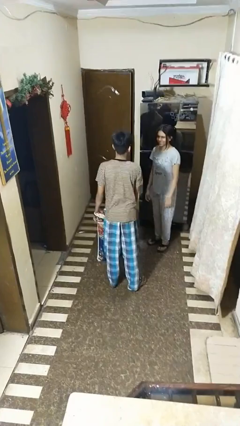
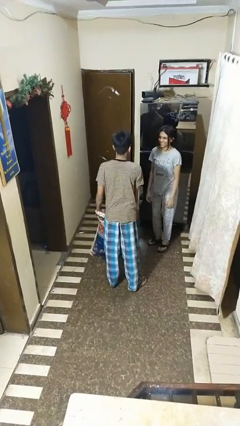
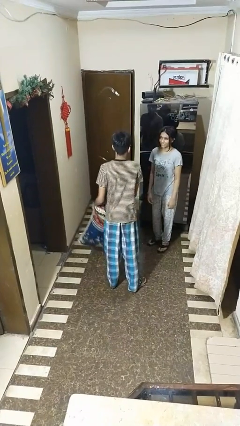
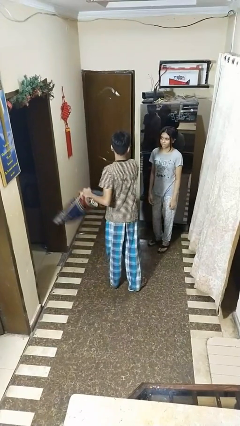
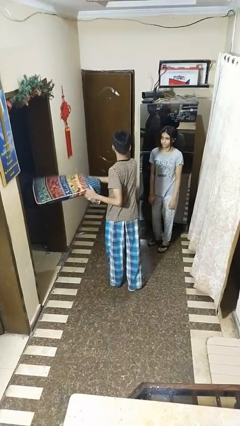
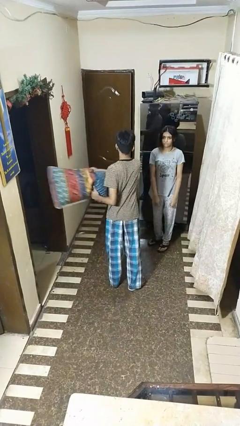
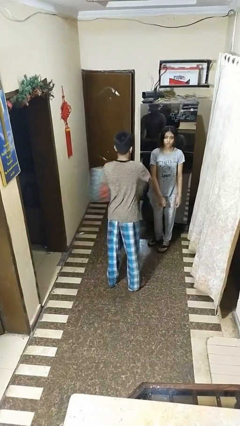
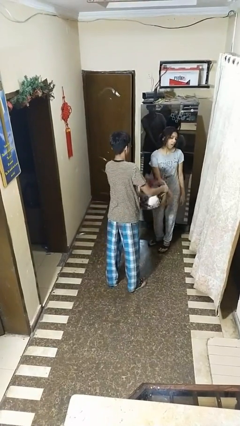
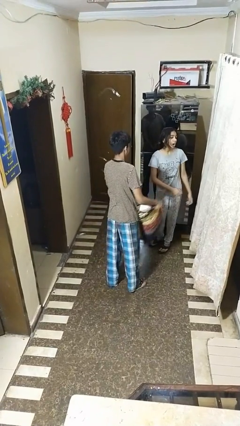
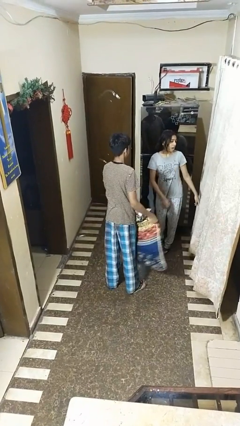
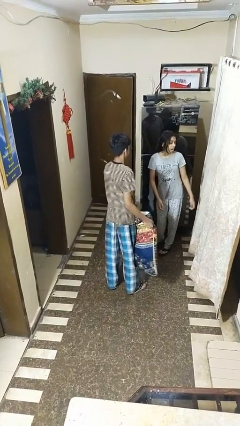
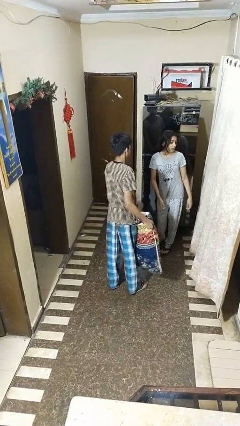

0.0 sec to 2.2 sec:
person hits person with pillow

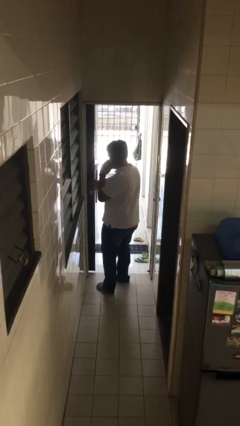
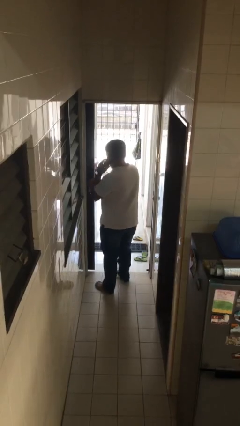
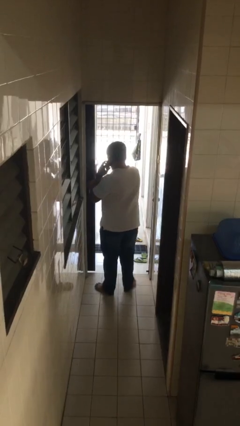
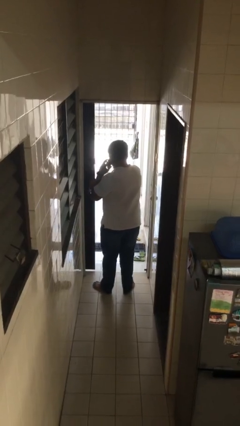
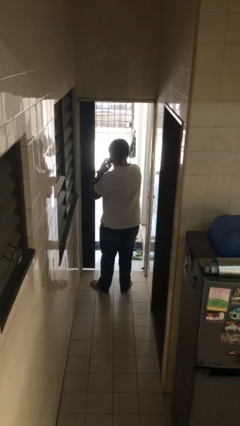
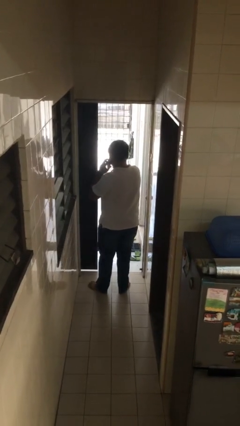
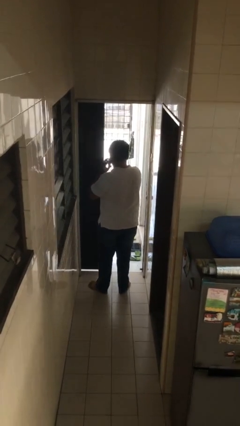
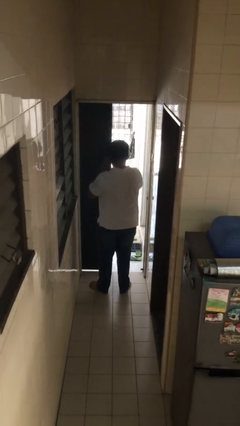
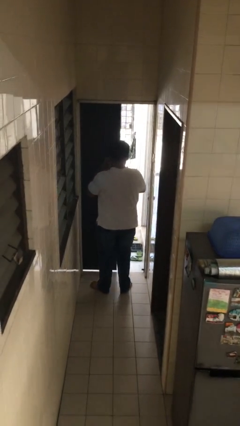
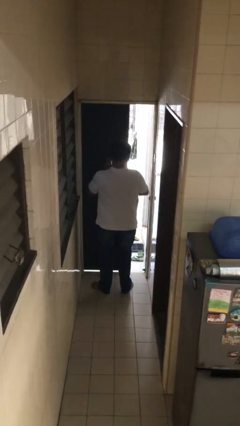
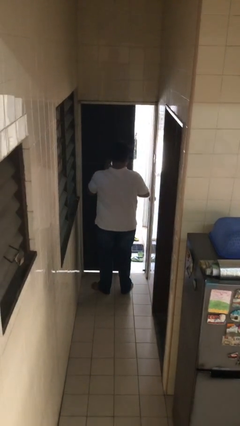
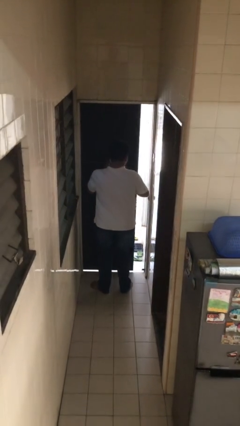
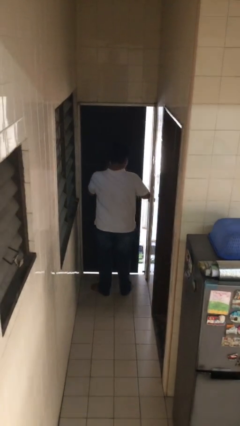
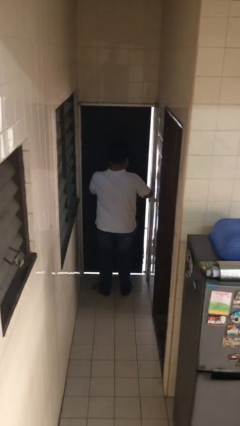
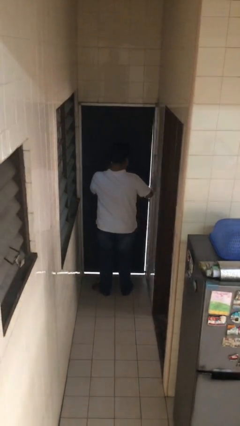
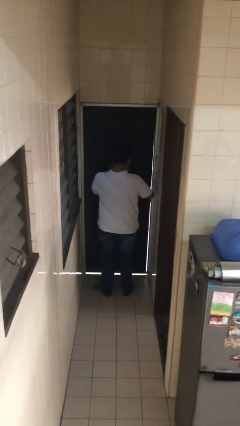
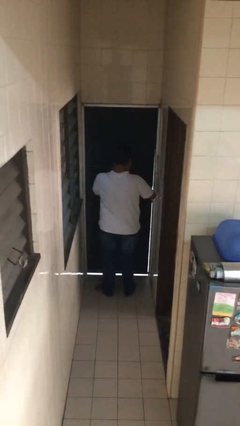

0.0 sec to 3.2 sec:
person closes facility door

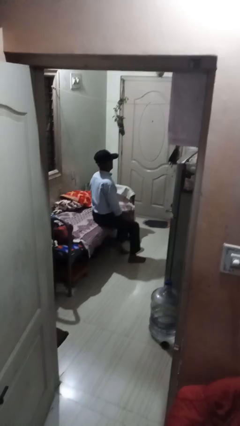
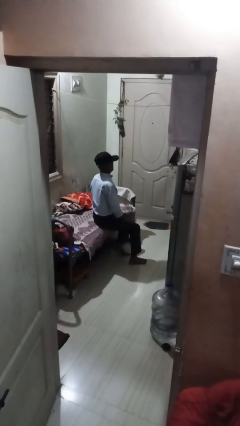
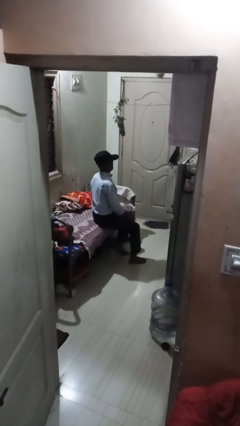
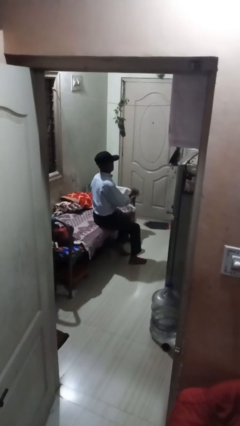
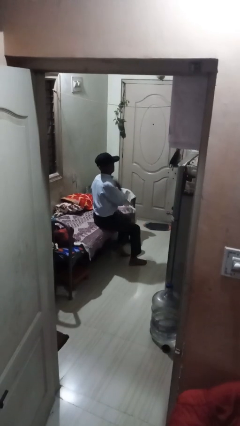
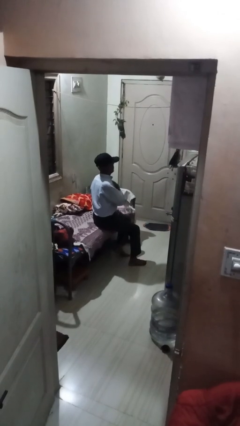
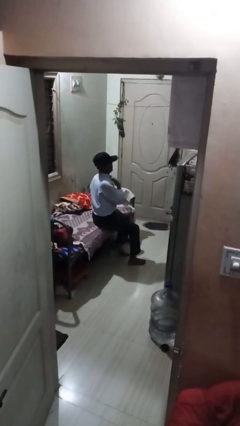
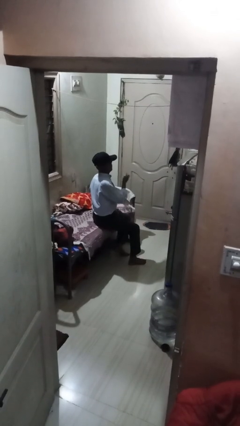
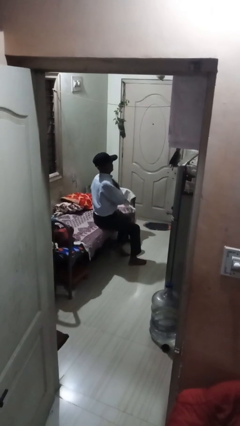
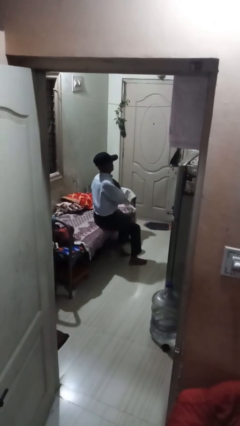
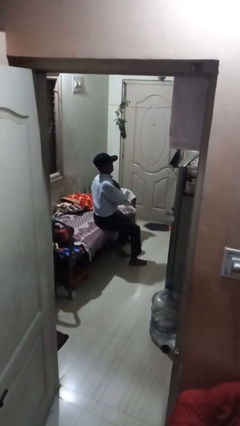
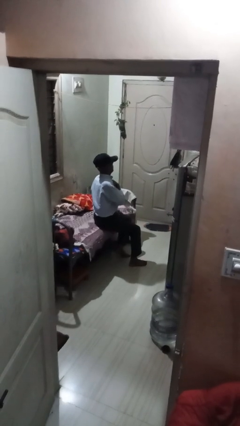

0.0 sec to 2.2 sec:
person drums on chest

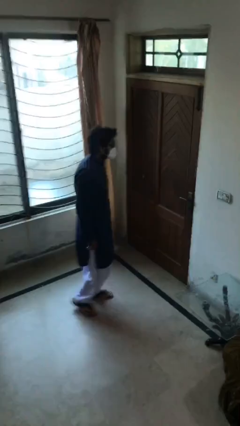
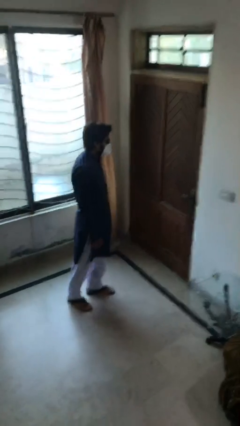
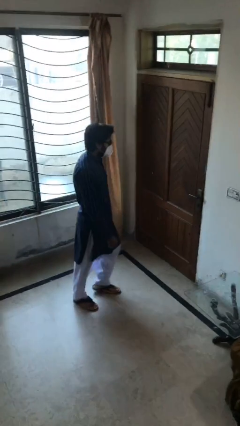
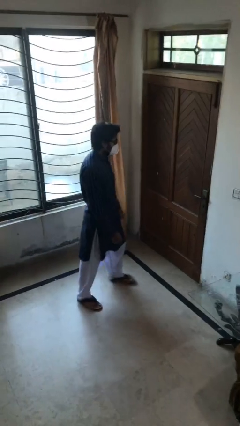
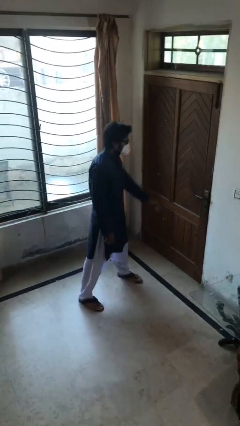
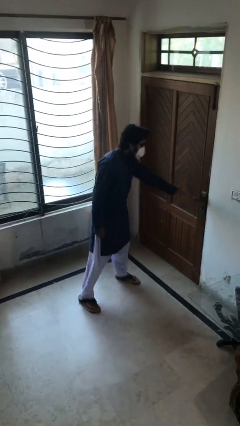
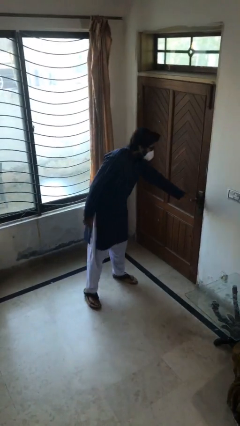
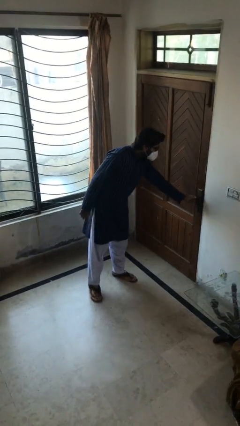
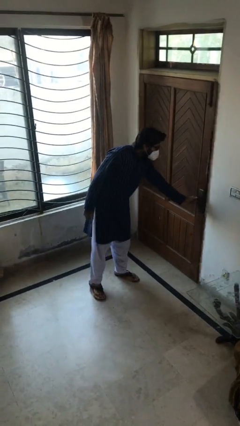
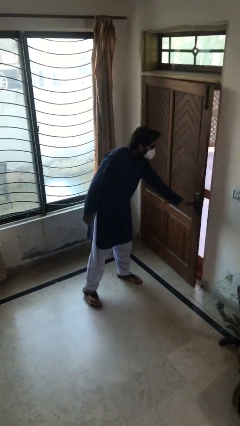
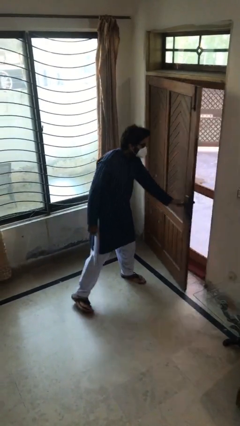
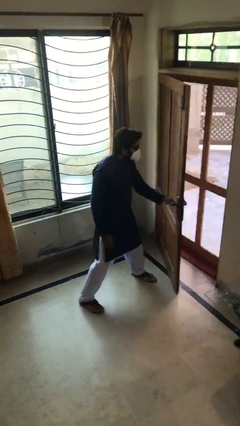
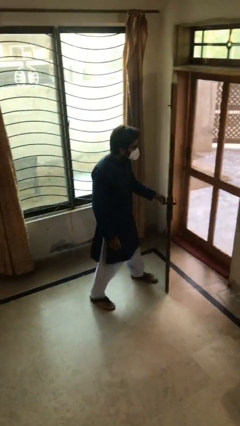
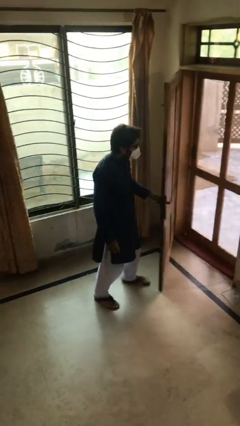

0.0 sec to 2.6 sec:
person opens facility door

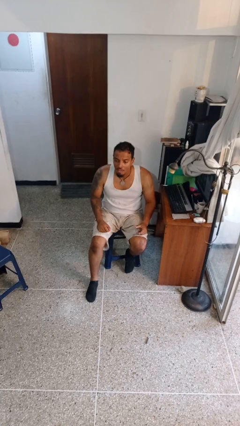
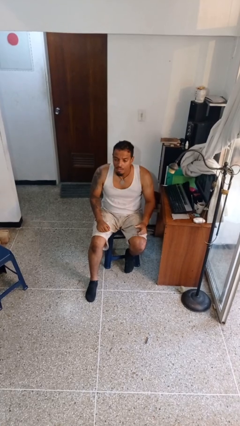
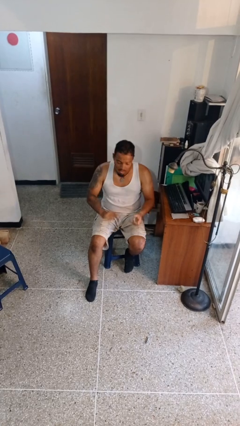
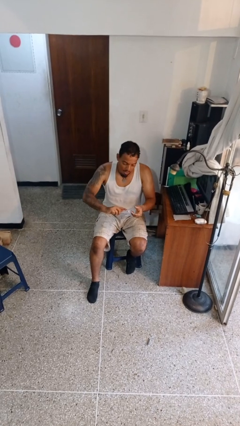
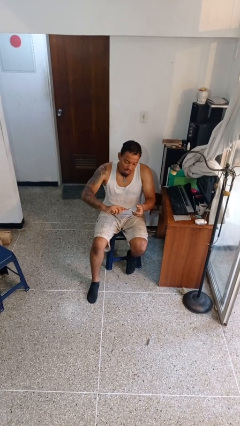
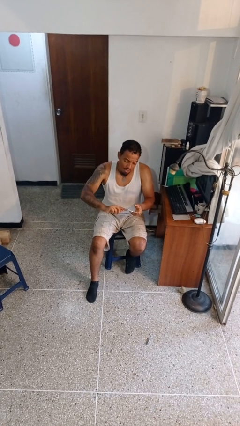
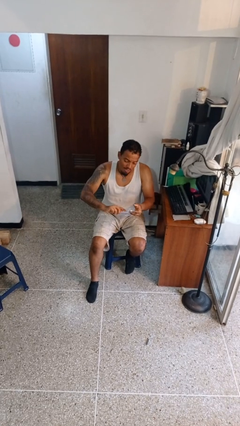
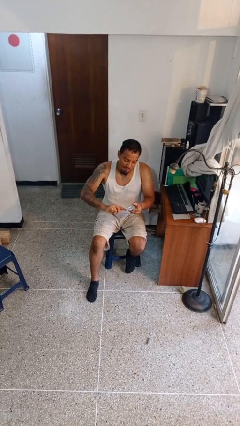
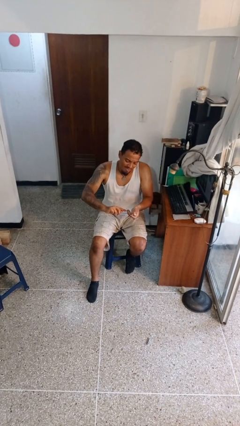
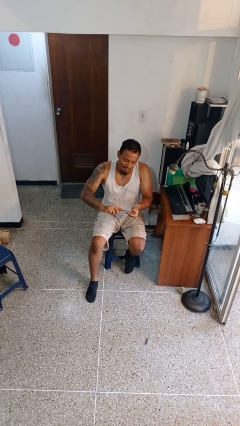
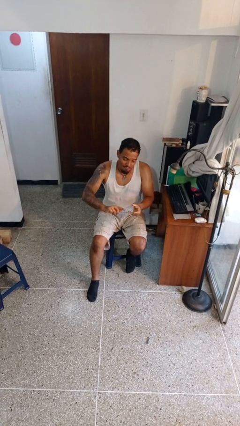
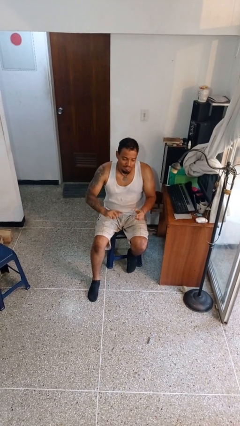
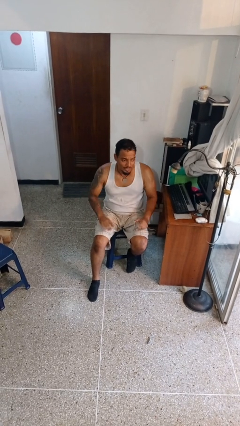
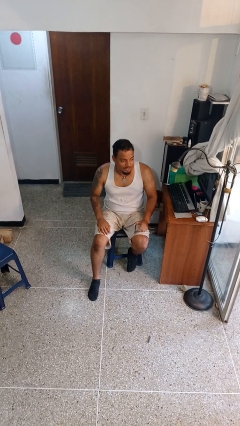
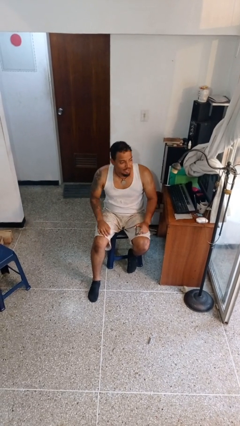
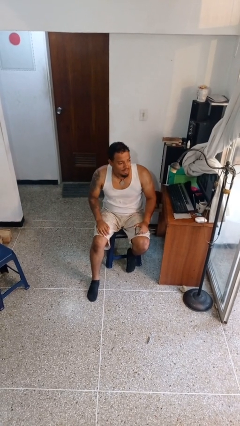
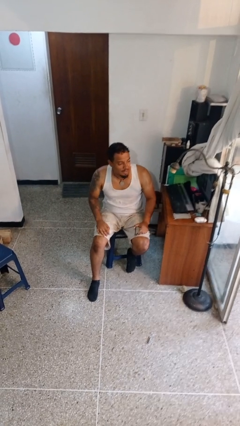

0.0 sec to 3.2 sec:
person clips fingernails

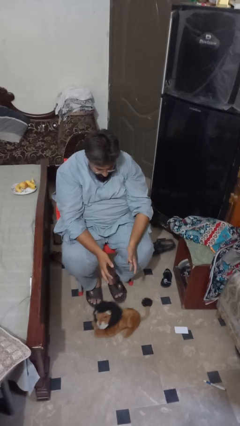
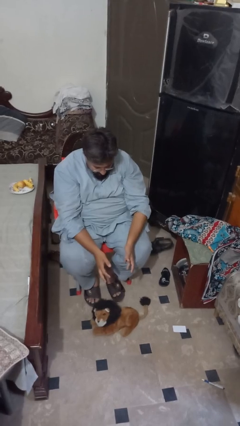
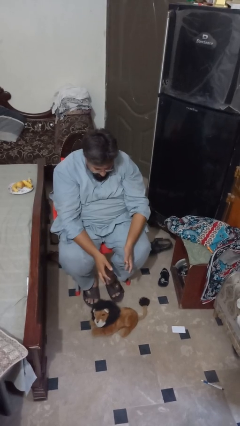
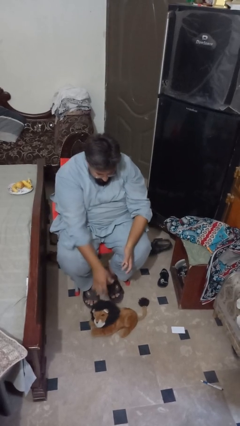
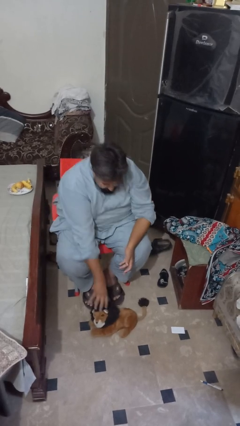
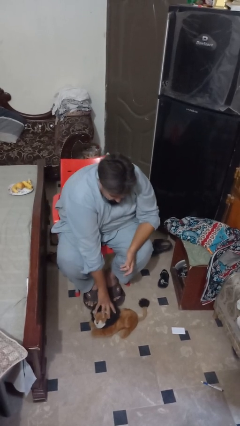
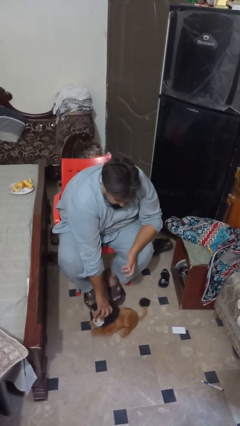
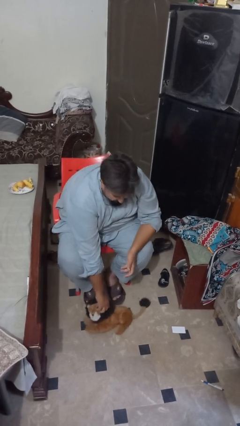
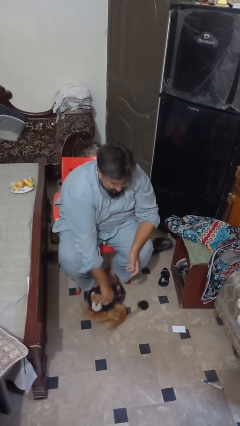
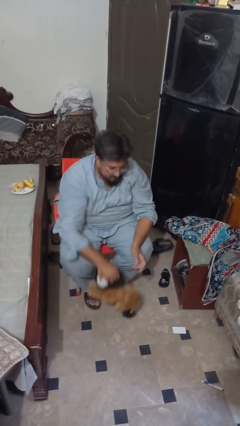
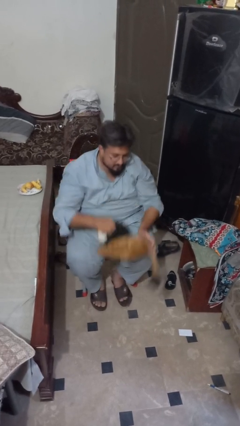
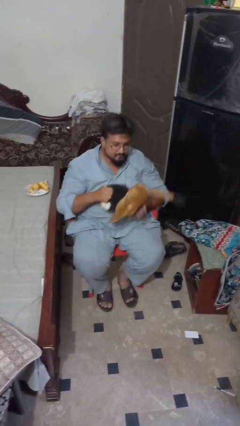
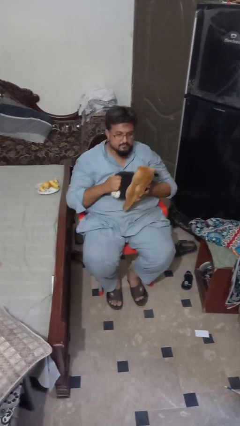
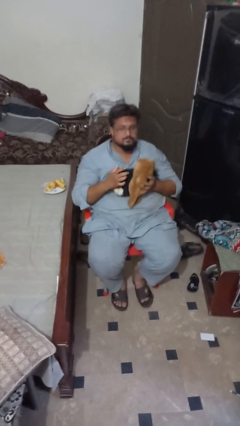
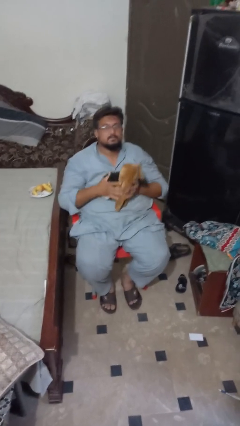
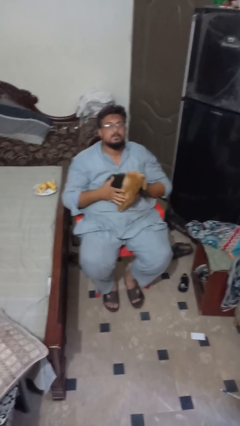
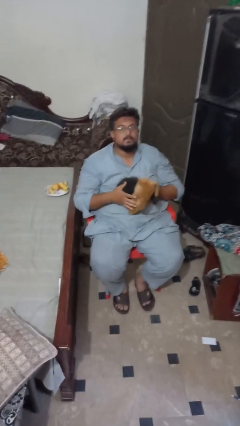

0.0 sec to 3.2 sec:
person picks up object from floor

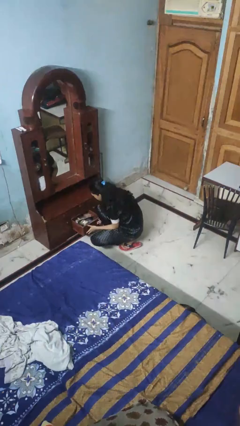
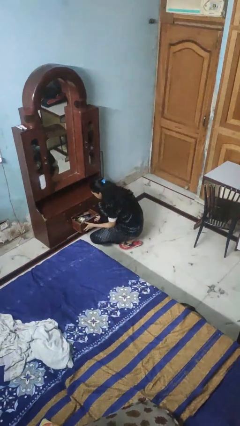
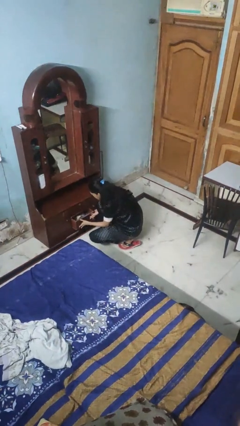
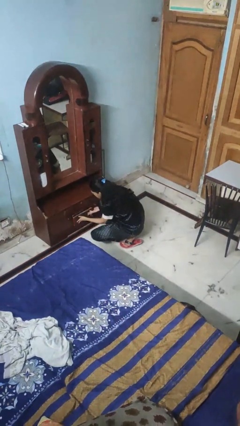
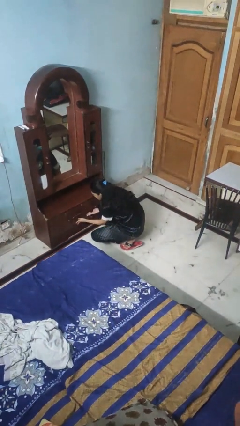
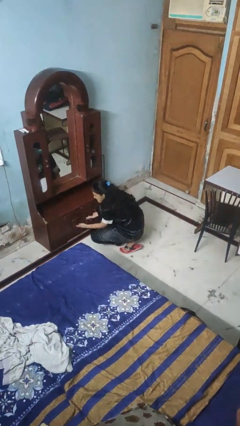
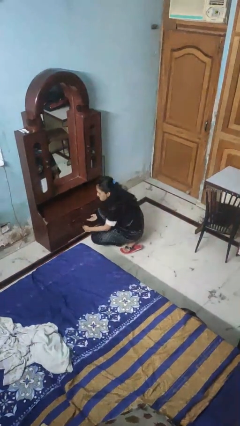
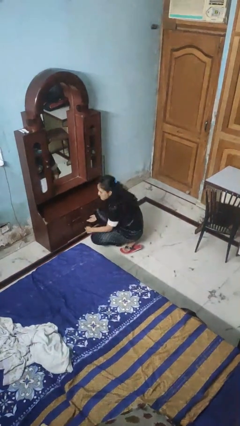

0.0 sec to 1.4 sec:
person closes dresser drawer
